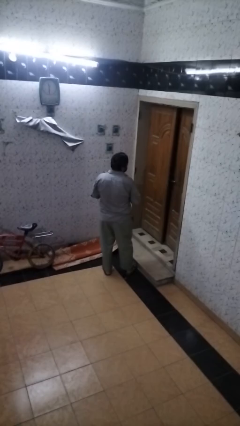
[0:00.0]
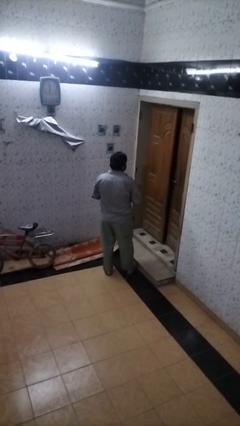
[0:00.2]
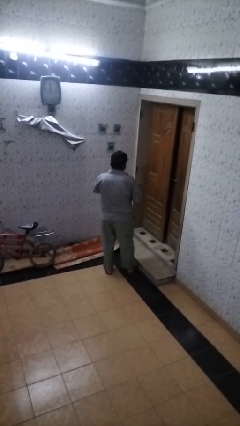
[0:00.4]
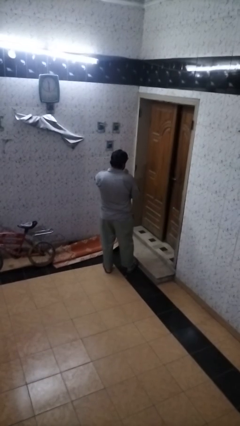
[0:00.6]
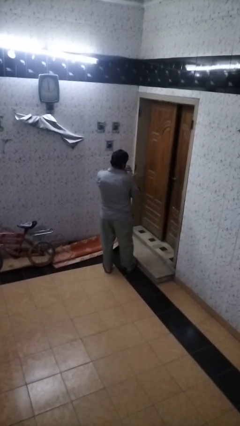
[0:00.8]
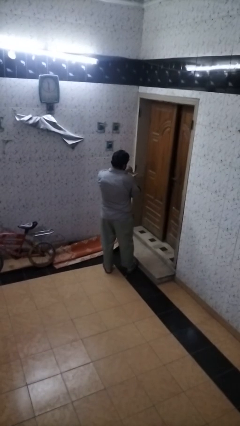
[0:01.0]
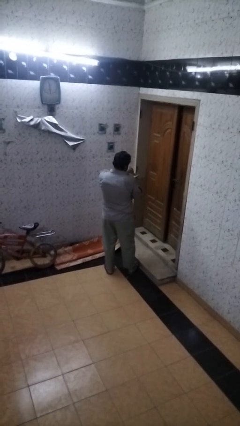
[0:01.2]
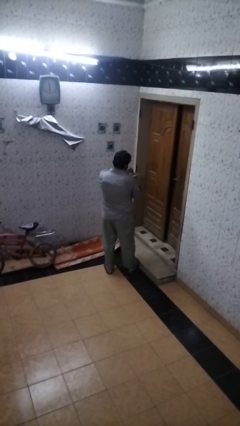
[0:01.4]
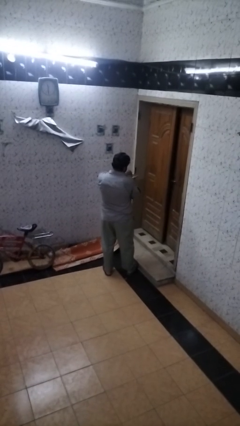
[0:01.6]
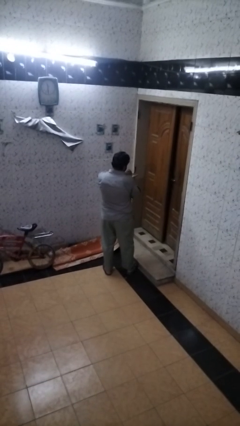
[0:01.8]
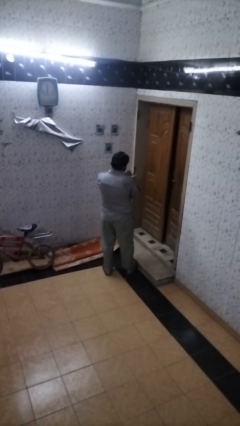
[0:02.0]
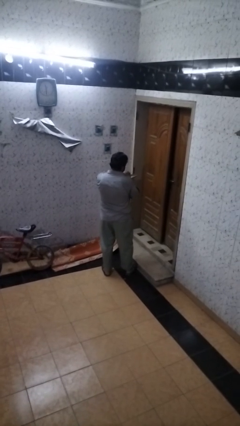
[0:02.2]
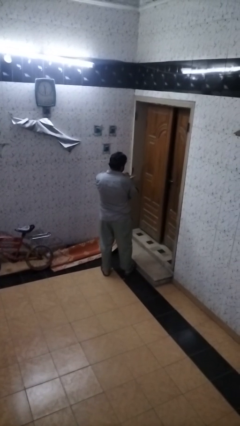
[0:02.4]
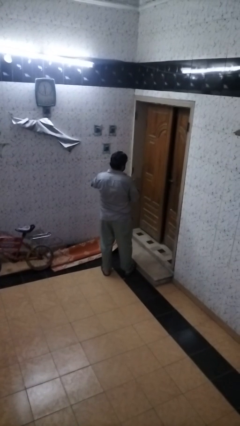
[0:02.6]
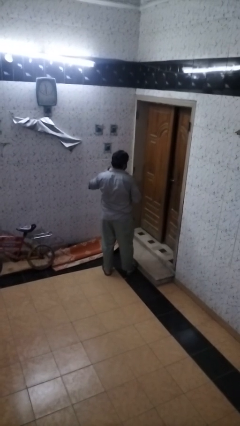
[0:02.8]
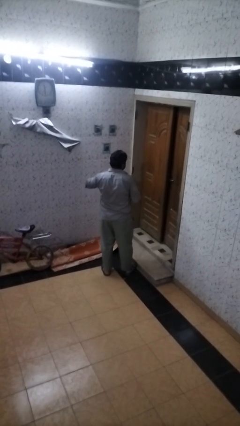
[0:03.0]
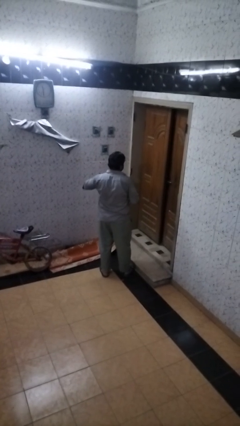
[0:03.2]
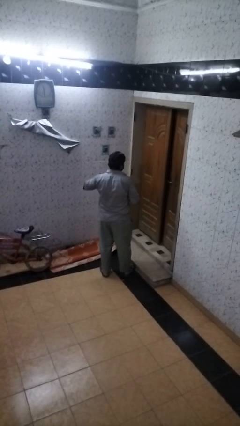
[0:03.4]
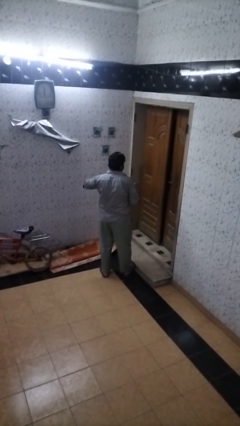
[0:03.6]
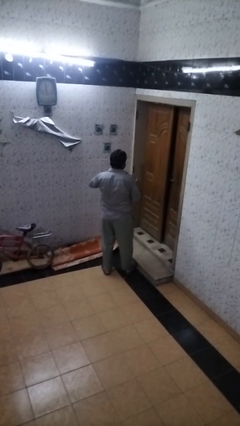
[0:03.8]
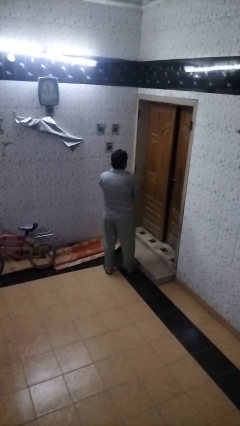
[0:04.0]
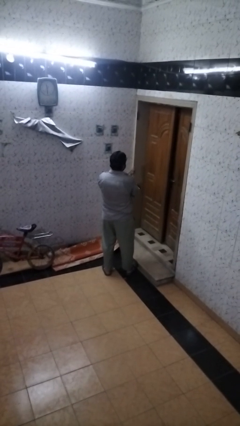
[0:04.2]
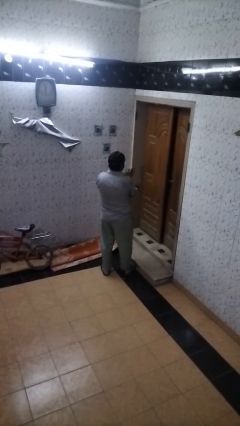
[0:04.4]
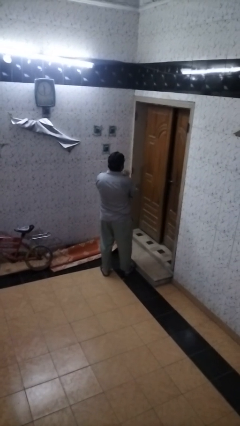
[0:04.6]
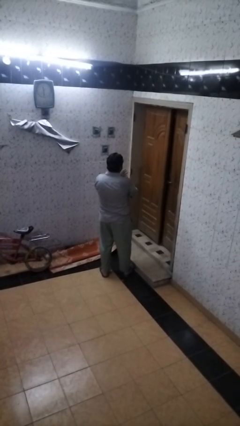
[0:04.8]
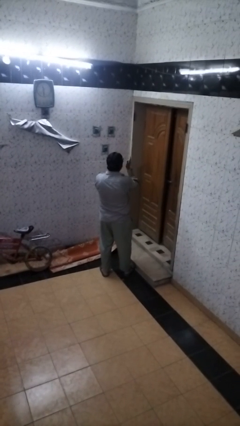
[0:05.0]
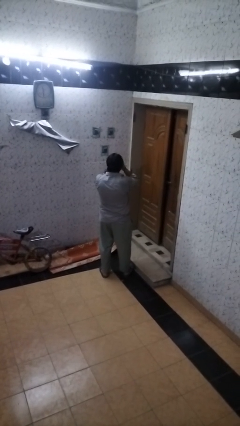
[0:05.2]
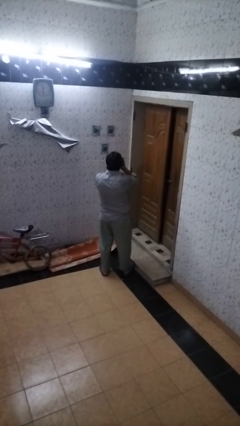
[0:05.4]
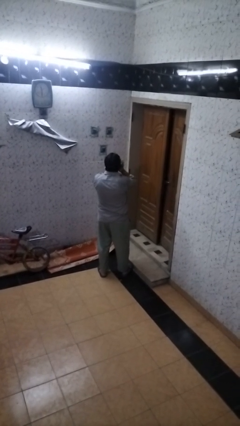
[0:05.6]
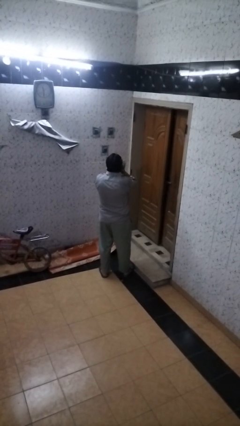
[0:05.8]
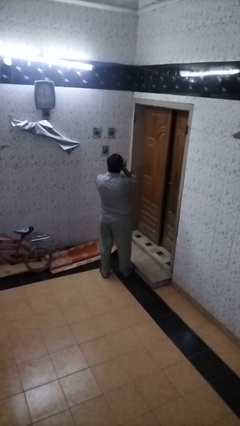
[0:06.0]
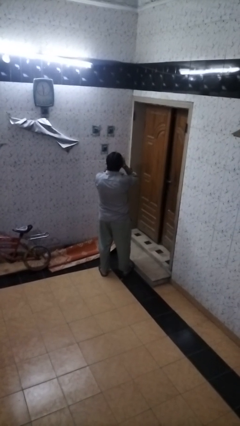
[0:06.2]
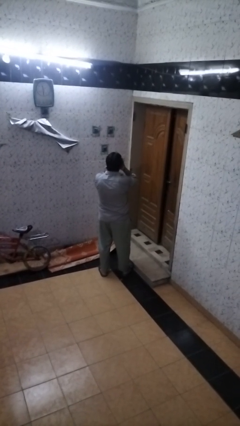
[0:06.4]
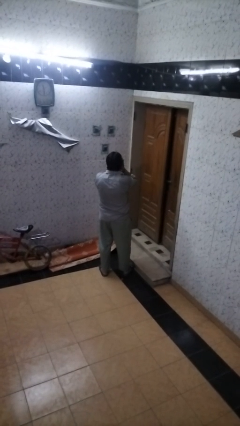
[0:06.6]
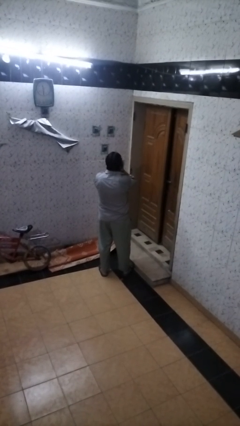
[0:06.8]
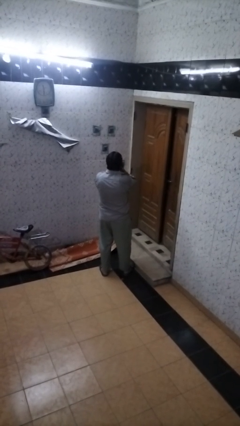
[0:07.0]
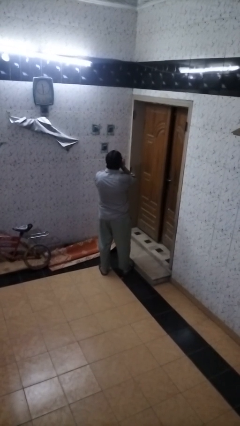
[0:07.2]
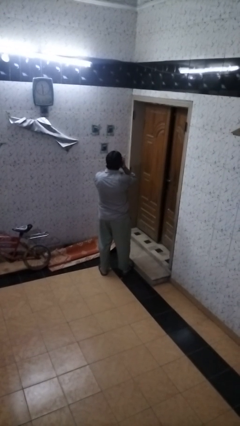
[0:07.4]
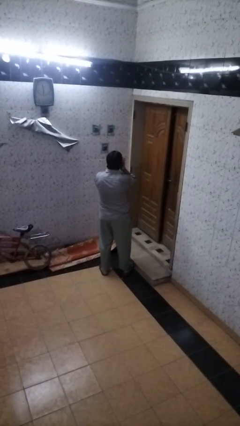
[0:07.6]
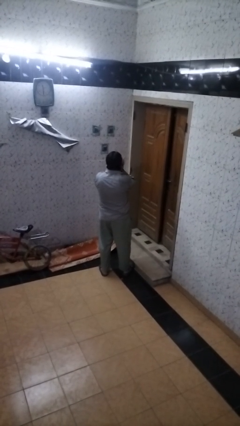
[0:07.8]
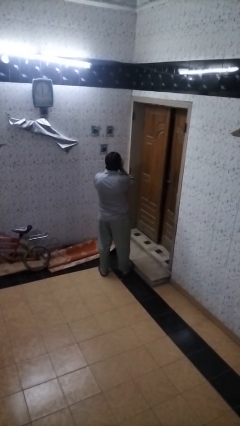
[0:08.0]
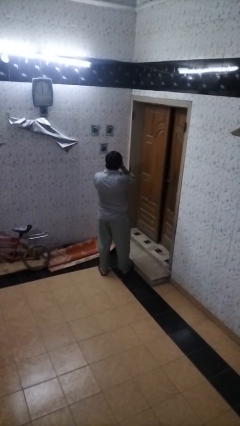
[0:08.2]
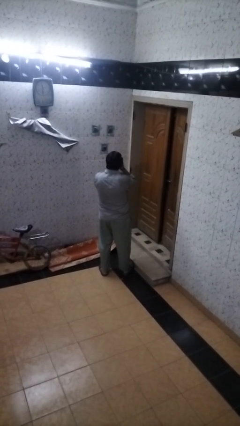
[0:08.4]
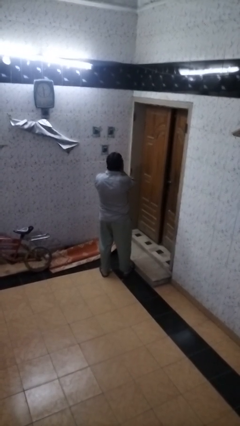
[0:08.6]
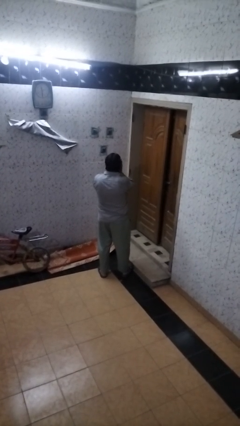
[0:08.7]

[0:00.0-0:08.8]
person applies facial moisturizer

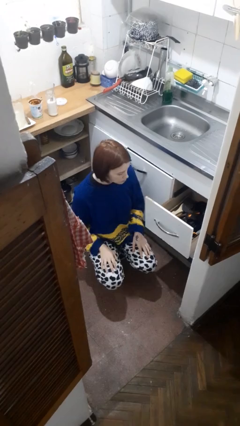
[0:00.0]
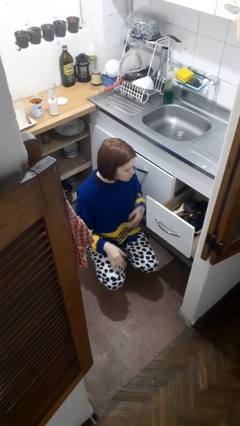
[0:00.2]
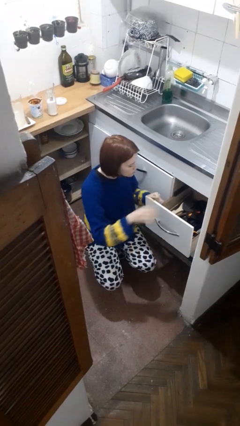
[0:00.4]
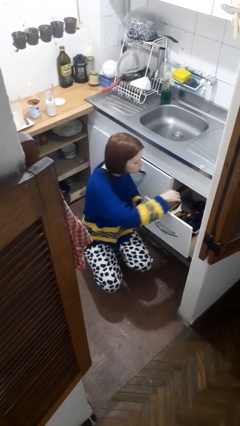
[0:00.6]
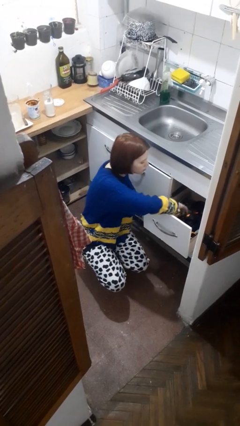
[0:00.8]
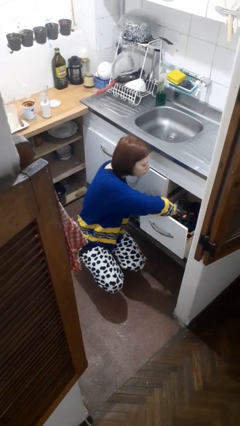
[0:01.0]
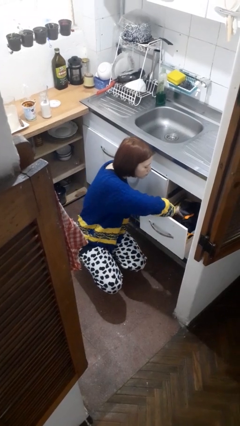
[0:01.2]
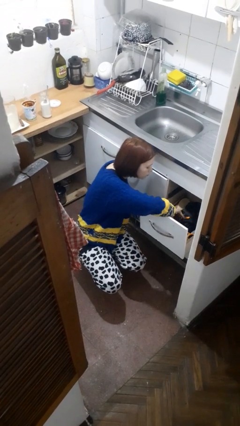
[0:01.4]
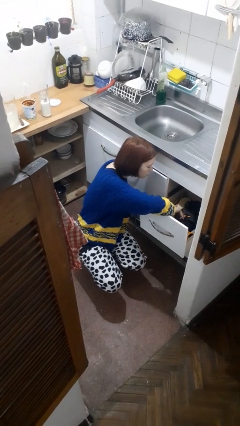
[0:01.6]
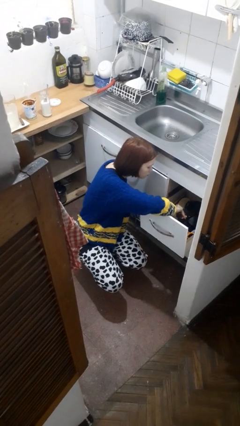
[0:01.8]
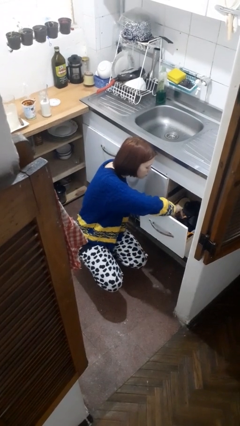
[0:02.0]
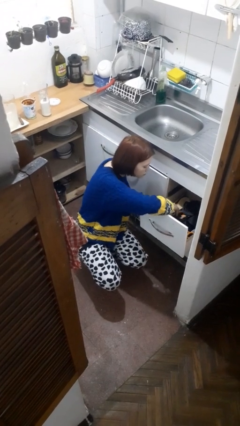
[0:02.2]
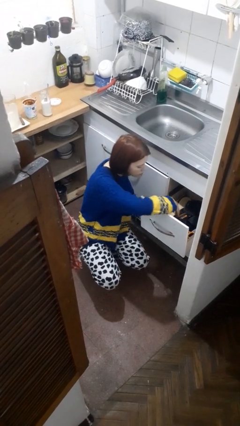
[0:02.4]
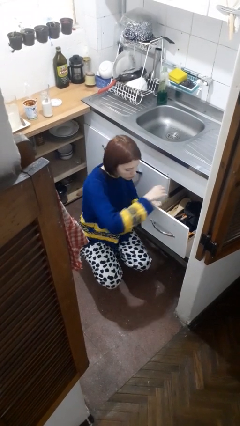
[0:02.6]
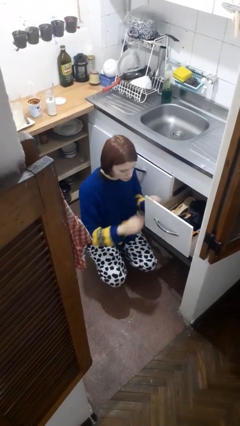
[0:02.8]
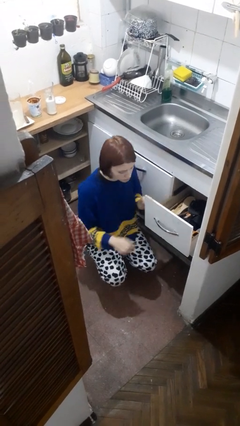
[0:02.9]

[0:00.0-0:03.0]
person searches in kitchen drawer

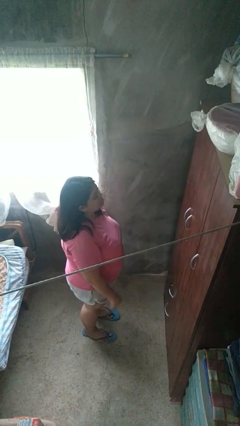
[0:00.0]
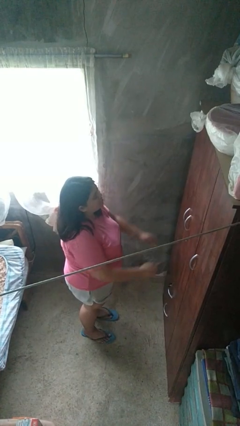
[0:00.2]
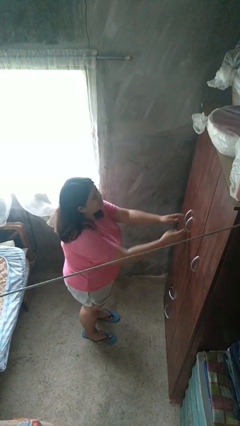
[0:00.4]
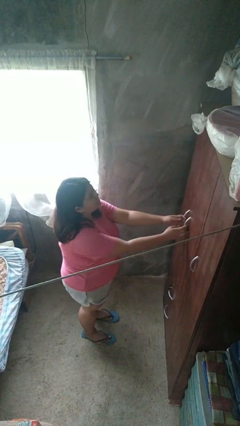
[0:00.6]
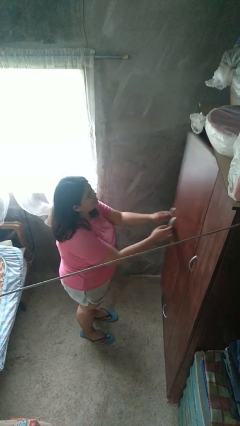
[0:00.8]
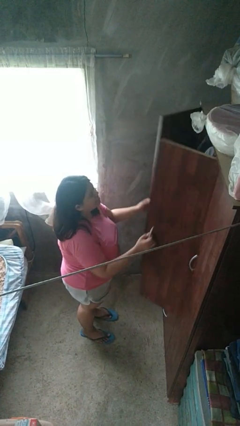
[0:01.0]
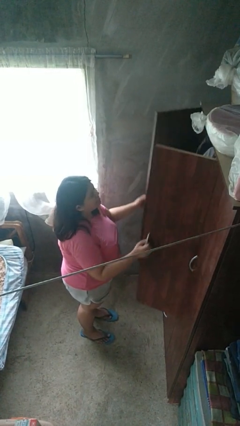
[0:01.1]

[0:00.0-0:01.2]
person opens closet door

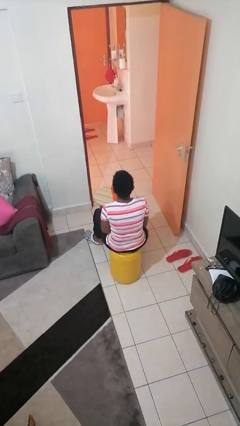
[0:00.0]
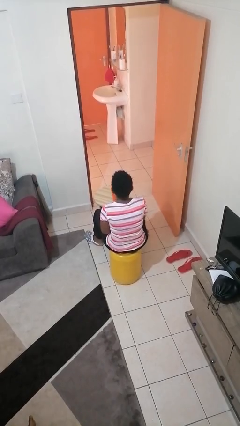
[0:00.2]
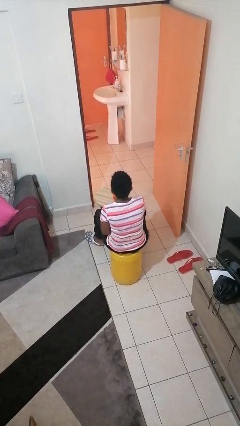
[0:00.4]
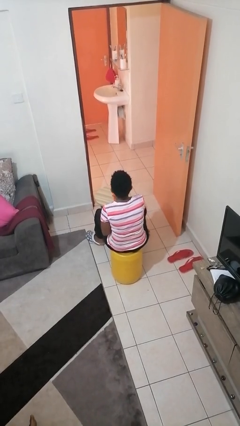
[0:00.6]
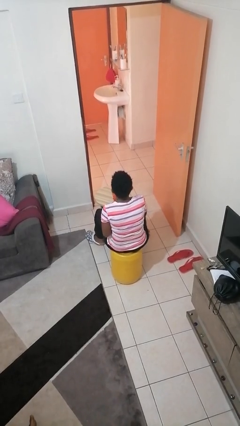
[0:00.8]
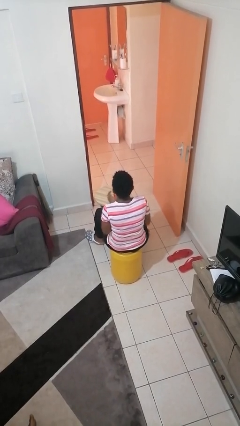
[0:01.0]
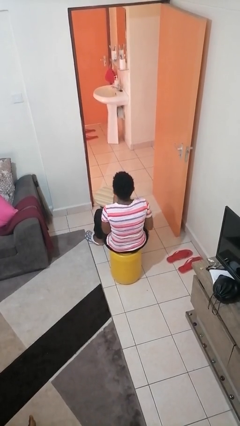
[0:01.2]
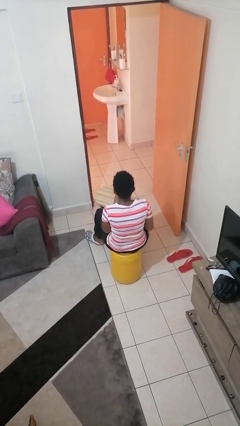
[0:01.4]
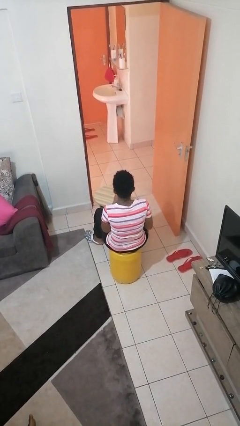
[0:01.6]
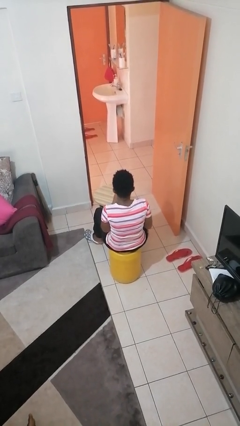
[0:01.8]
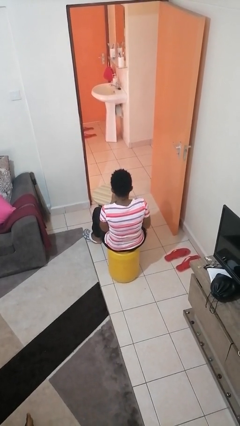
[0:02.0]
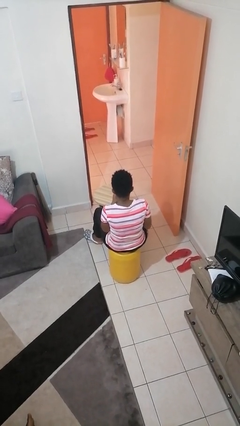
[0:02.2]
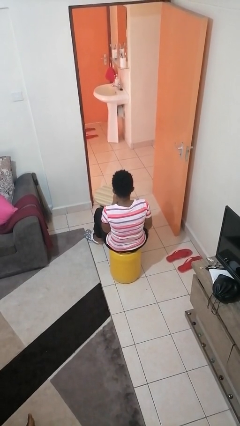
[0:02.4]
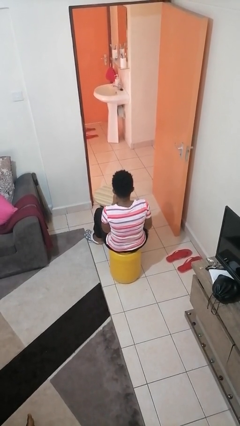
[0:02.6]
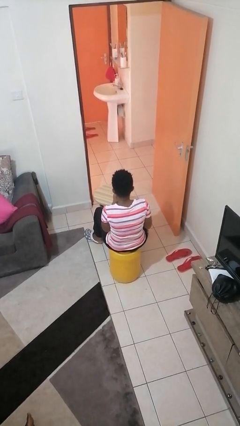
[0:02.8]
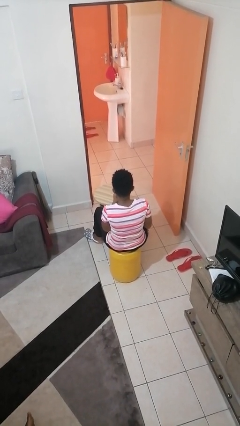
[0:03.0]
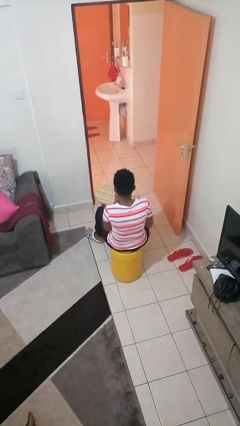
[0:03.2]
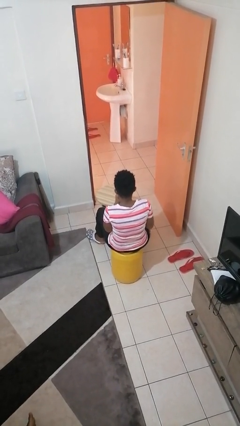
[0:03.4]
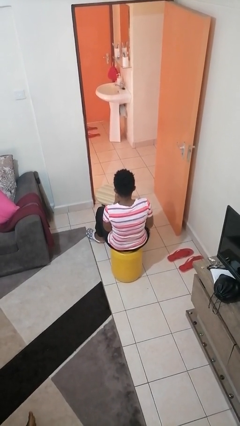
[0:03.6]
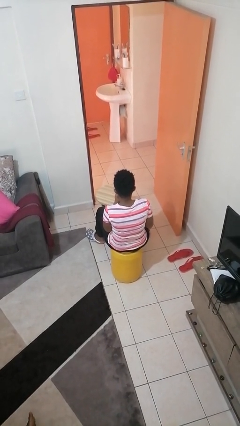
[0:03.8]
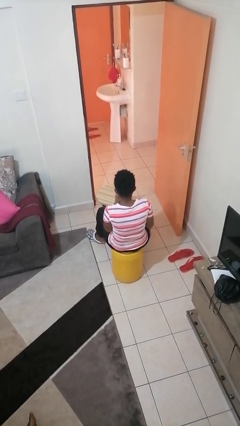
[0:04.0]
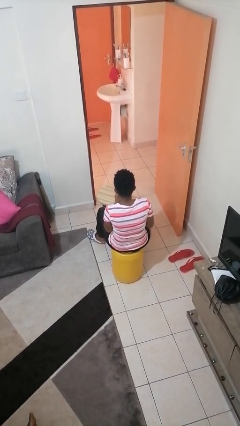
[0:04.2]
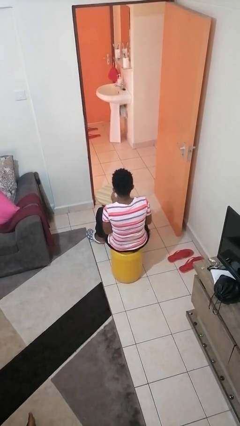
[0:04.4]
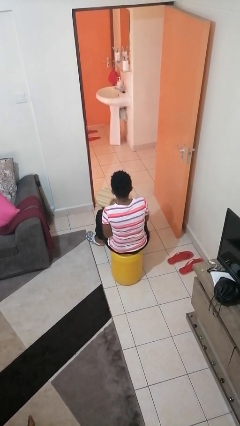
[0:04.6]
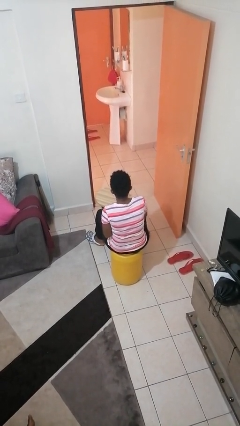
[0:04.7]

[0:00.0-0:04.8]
person drinks from straw
